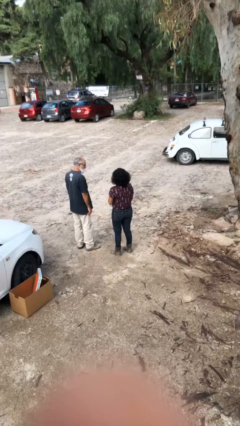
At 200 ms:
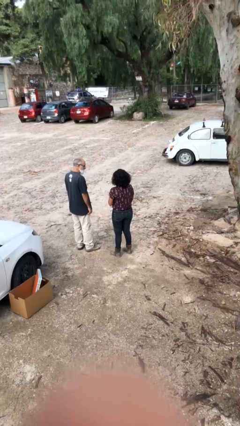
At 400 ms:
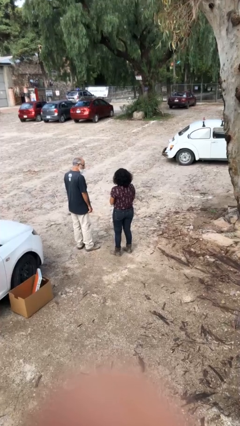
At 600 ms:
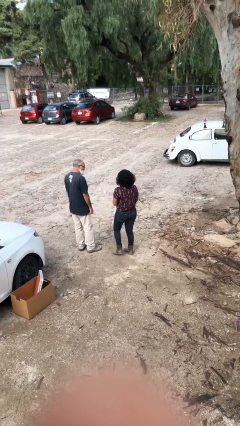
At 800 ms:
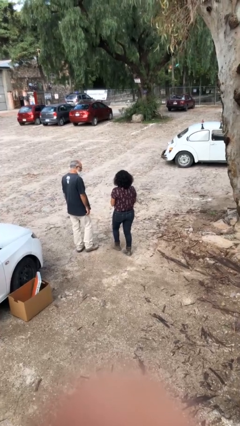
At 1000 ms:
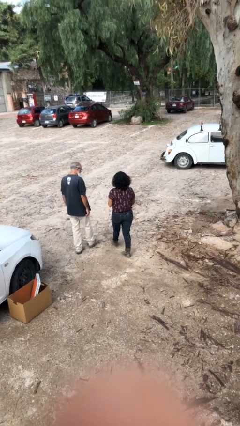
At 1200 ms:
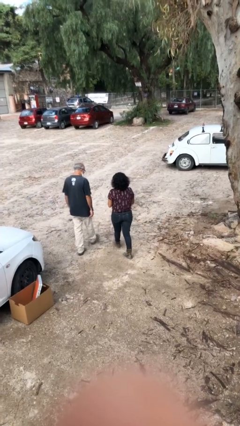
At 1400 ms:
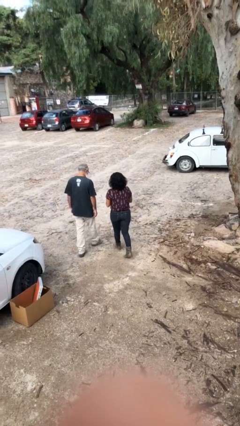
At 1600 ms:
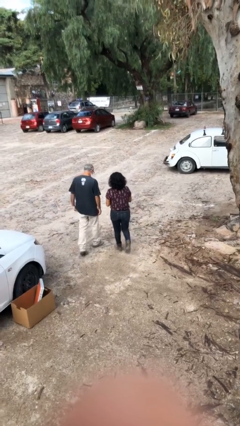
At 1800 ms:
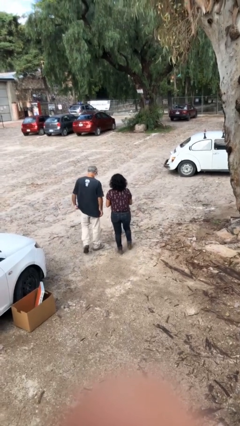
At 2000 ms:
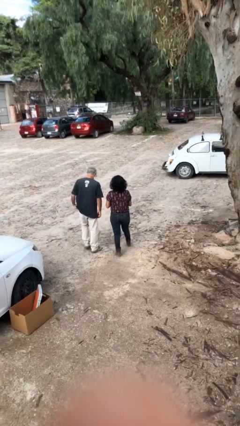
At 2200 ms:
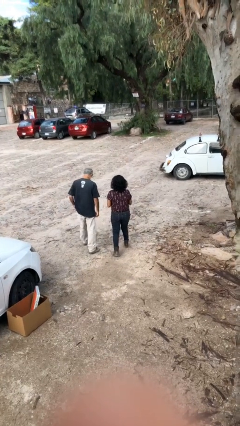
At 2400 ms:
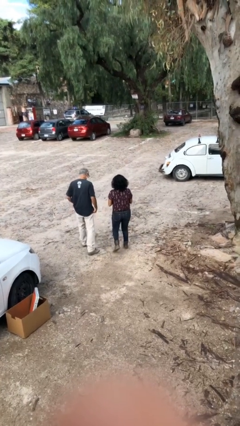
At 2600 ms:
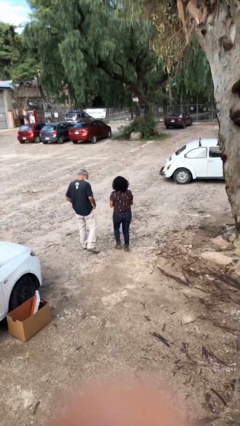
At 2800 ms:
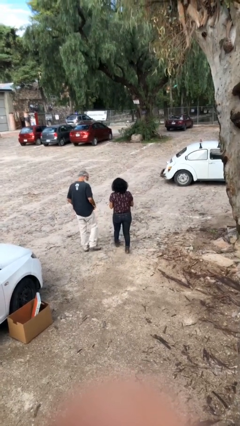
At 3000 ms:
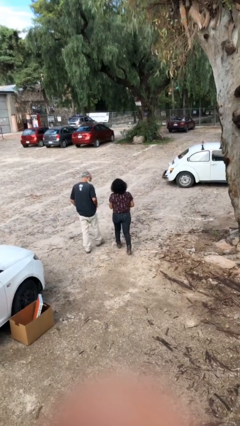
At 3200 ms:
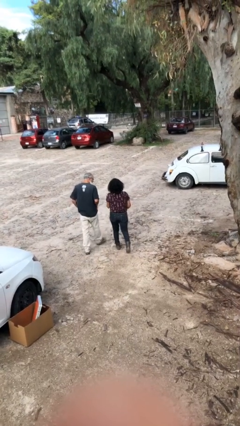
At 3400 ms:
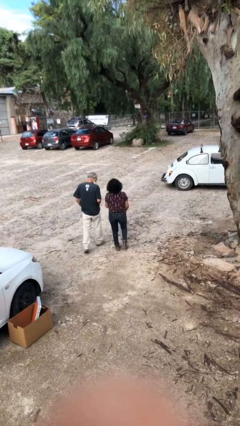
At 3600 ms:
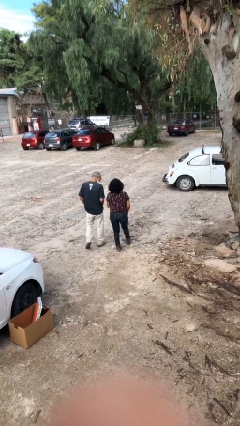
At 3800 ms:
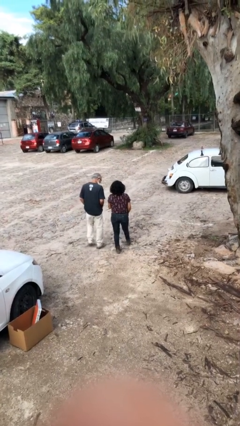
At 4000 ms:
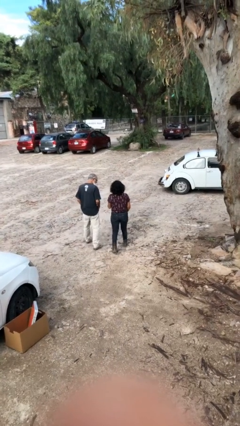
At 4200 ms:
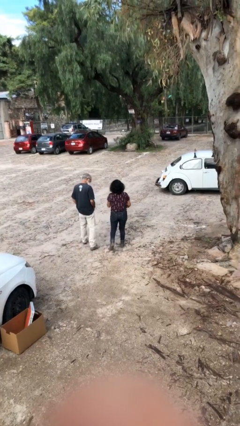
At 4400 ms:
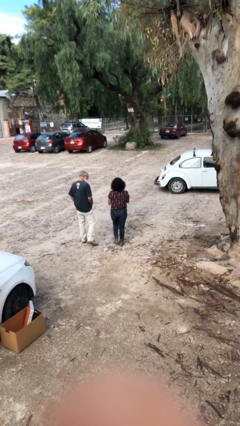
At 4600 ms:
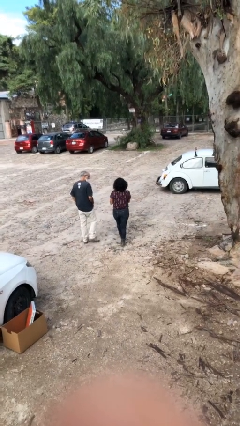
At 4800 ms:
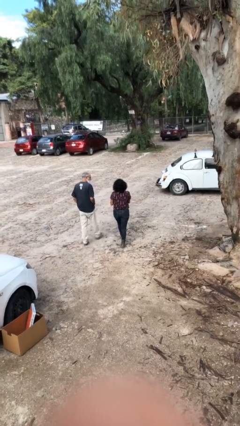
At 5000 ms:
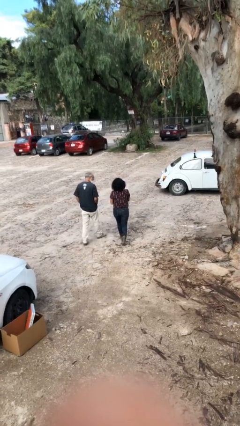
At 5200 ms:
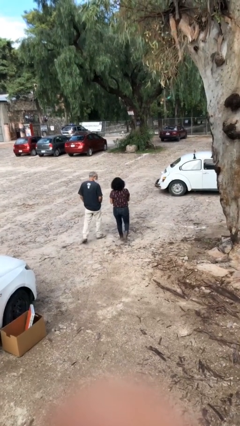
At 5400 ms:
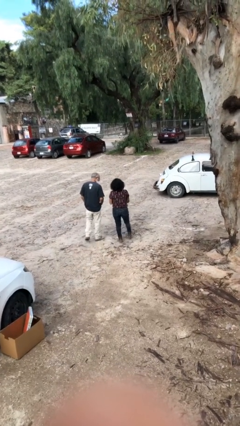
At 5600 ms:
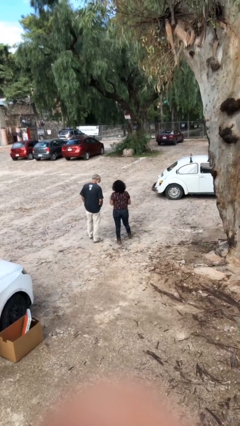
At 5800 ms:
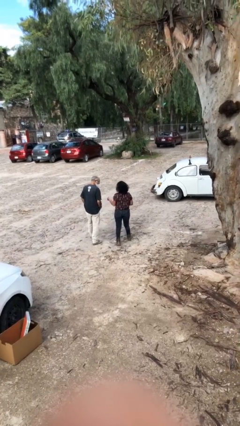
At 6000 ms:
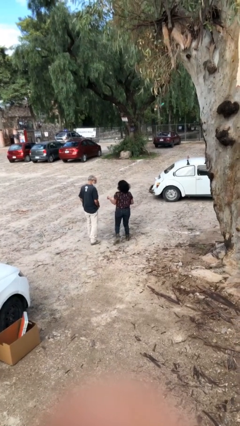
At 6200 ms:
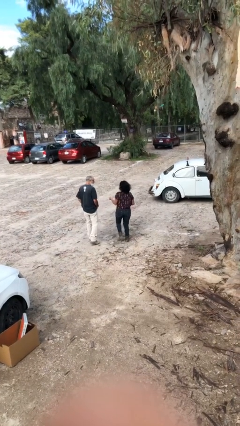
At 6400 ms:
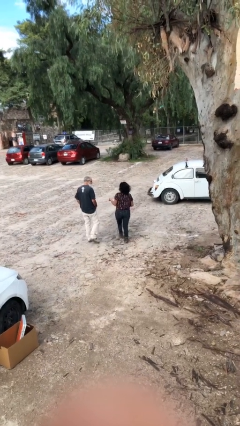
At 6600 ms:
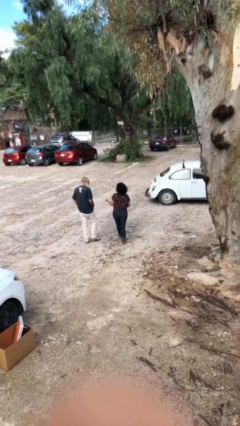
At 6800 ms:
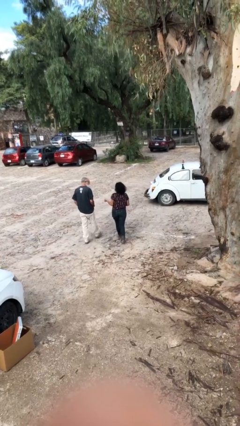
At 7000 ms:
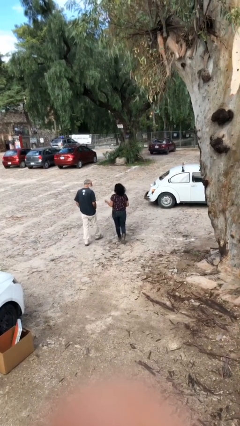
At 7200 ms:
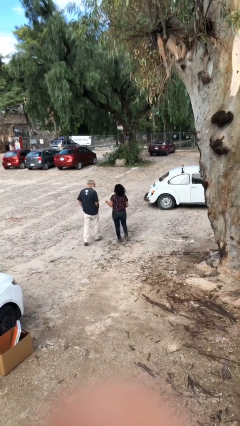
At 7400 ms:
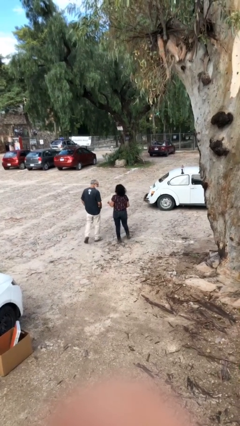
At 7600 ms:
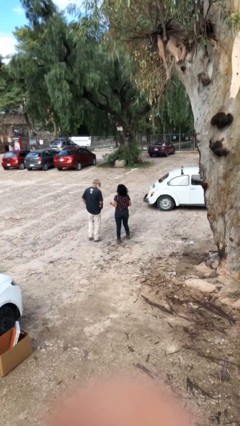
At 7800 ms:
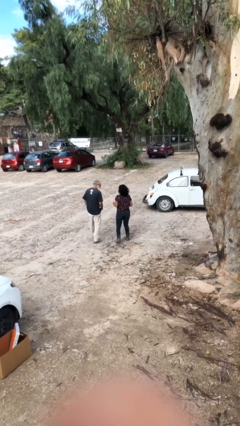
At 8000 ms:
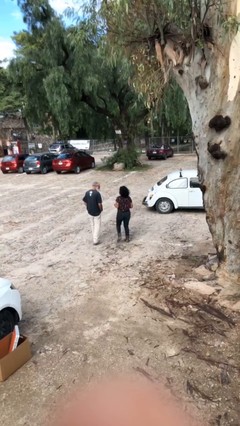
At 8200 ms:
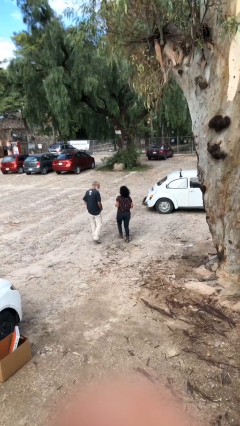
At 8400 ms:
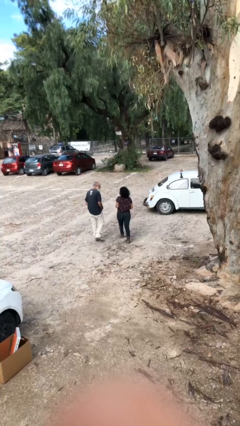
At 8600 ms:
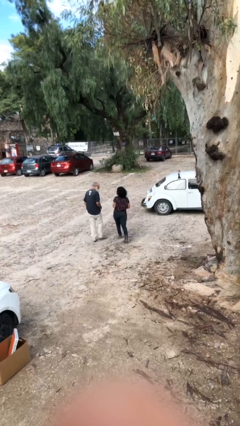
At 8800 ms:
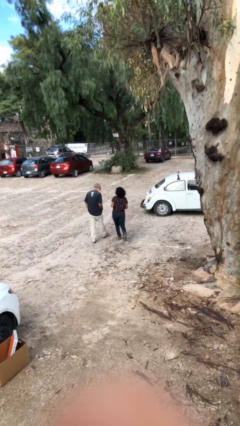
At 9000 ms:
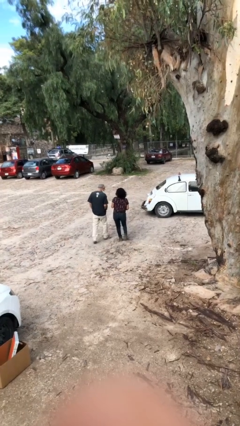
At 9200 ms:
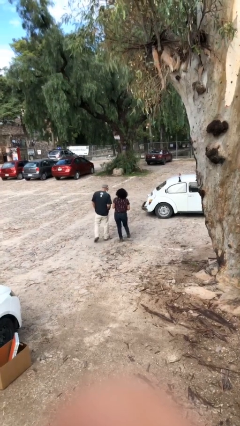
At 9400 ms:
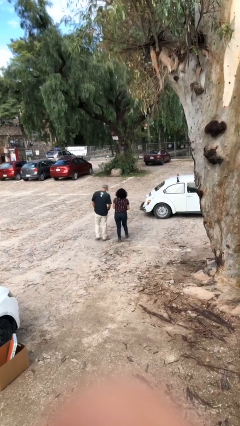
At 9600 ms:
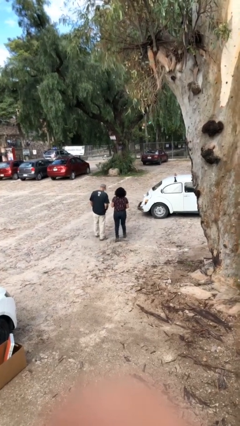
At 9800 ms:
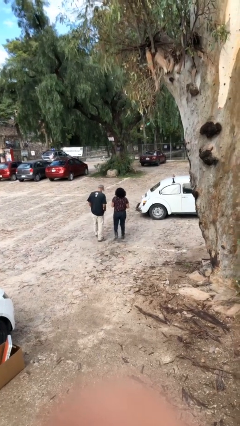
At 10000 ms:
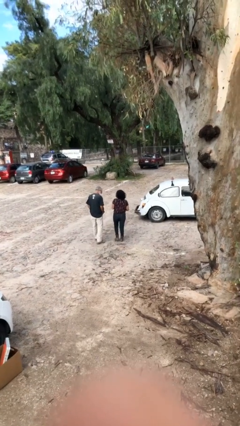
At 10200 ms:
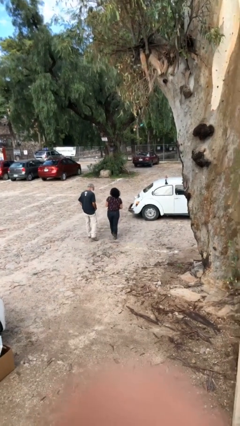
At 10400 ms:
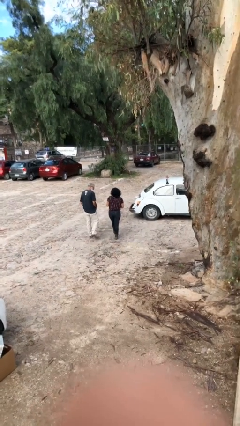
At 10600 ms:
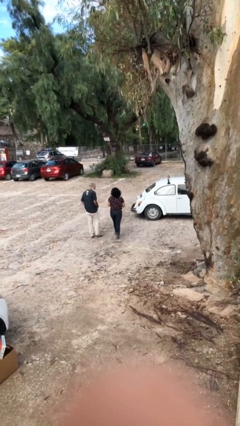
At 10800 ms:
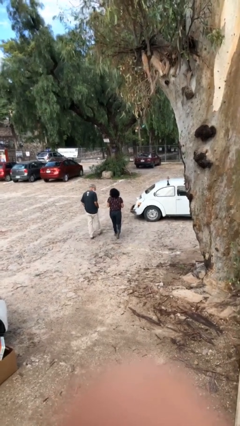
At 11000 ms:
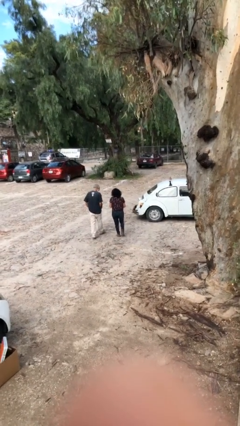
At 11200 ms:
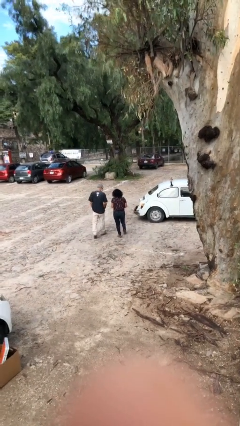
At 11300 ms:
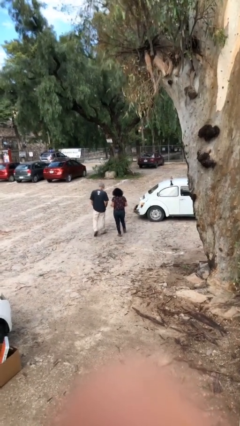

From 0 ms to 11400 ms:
person talks to person

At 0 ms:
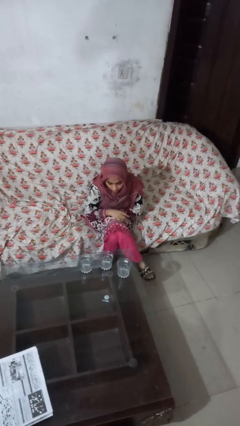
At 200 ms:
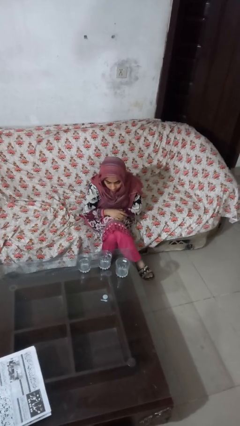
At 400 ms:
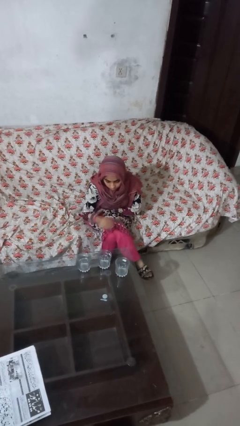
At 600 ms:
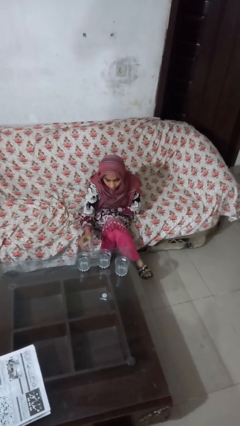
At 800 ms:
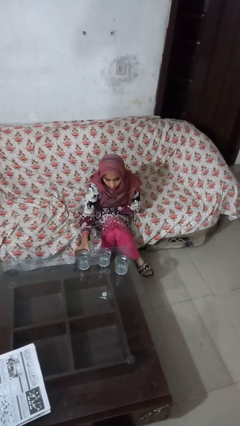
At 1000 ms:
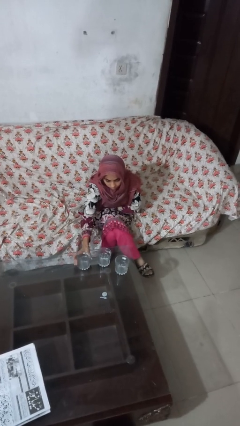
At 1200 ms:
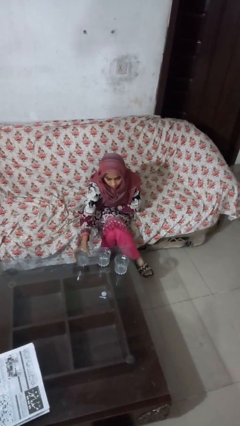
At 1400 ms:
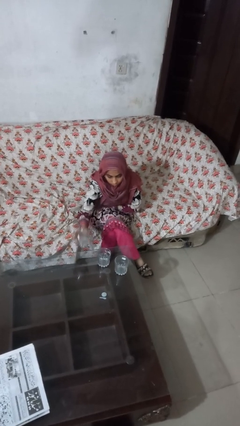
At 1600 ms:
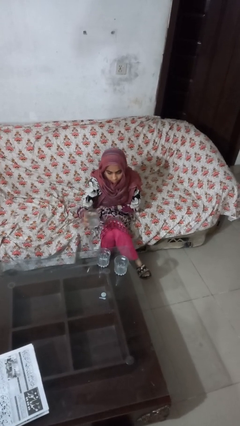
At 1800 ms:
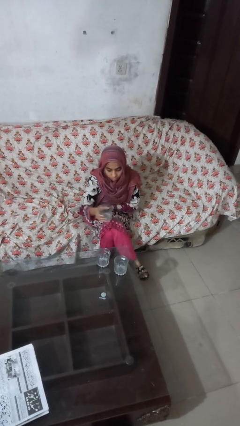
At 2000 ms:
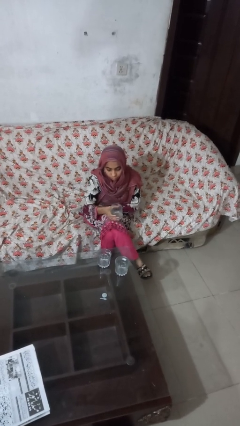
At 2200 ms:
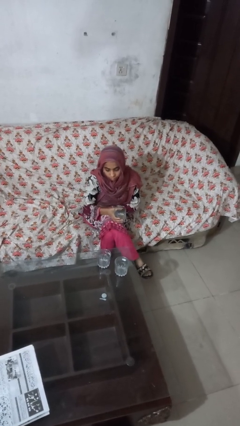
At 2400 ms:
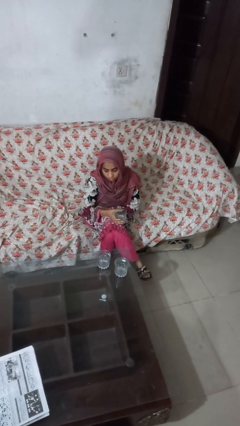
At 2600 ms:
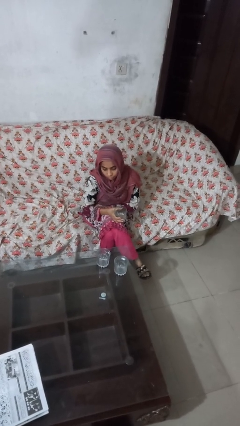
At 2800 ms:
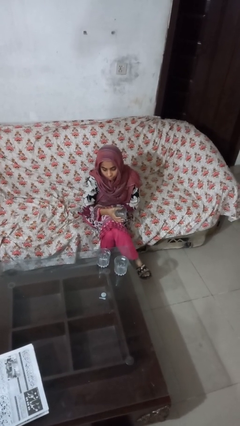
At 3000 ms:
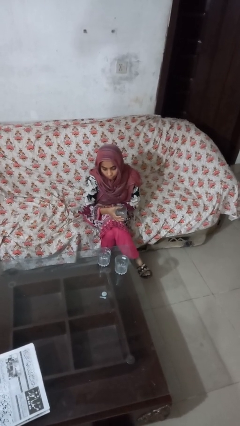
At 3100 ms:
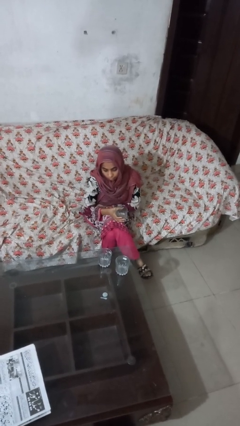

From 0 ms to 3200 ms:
person picks up object from table

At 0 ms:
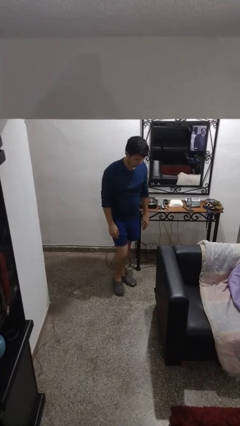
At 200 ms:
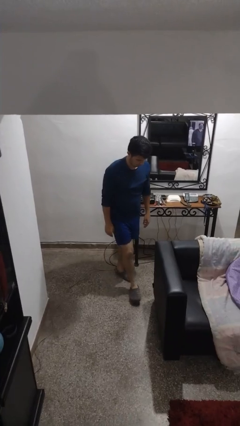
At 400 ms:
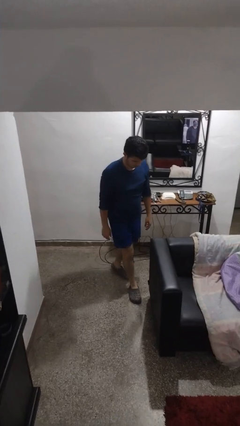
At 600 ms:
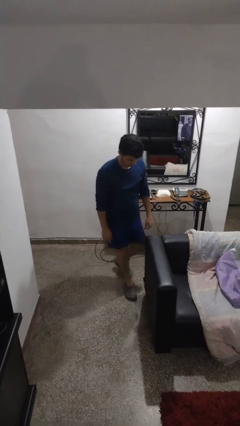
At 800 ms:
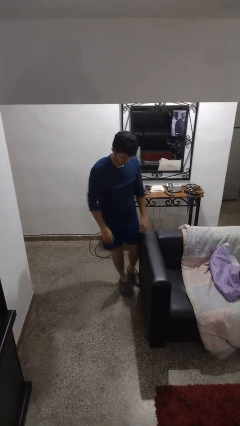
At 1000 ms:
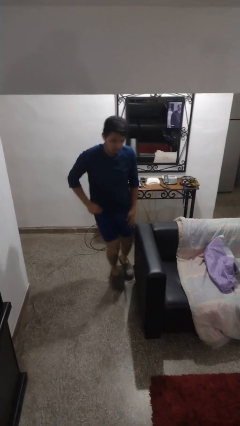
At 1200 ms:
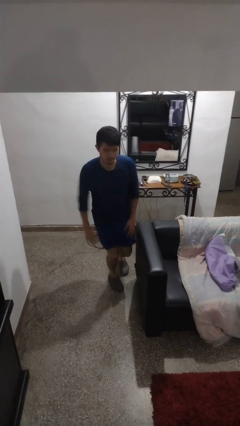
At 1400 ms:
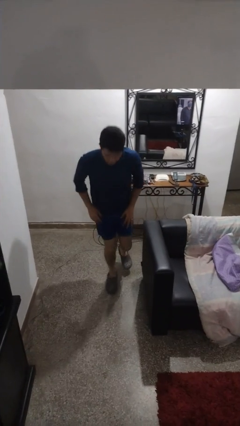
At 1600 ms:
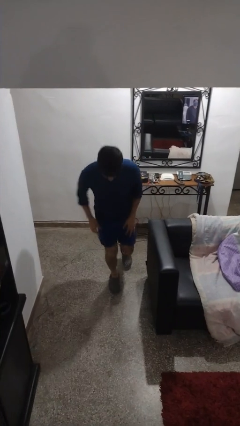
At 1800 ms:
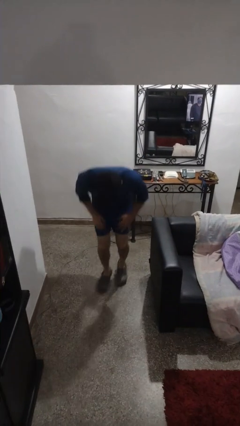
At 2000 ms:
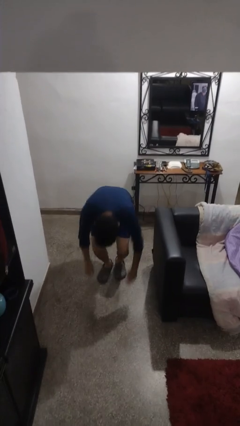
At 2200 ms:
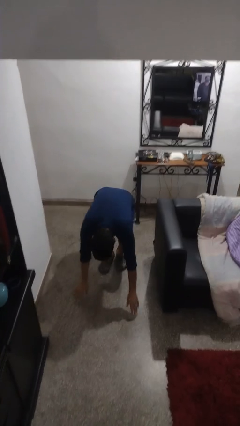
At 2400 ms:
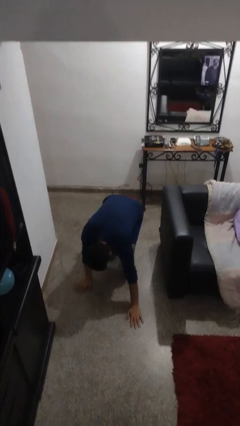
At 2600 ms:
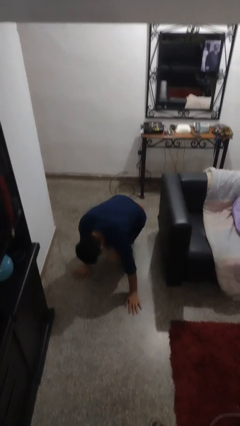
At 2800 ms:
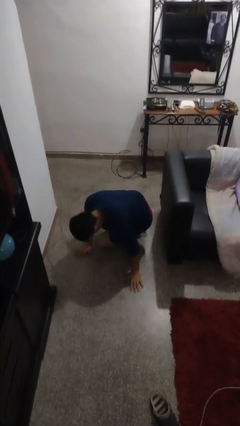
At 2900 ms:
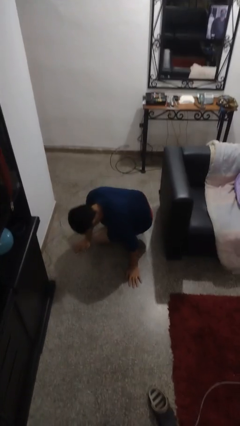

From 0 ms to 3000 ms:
person trips on object on floor

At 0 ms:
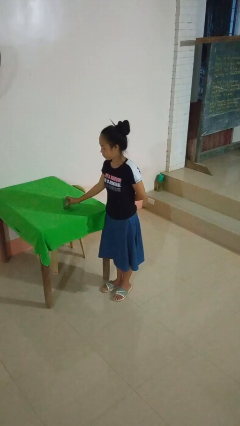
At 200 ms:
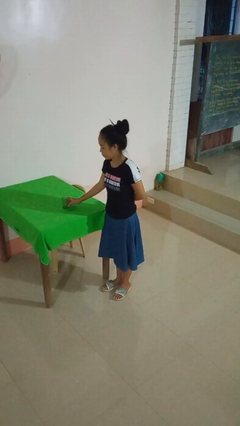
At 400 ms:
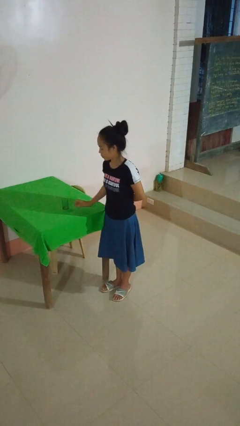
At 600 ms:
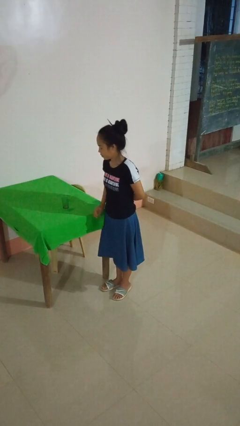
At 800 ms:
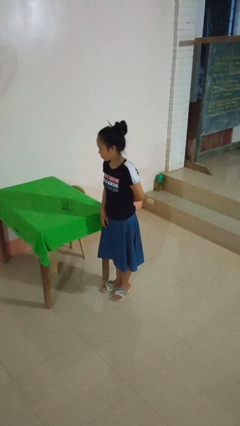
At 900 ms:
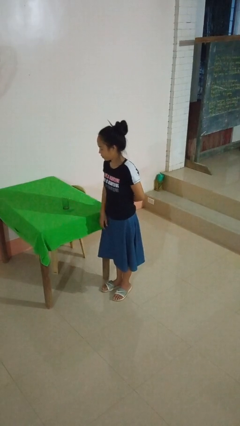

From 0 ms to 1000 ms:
person sets upright glass
